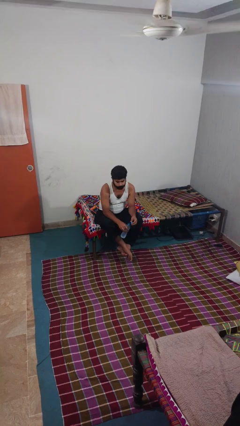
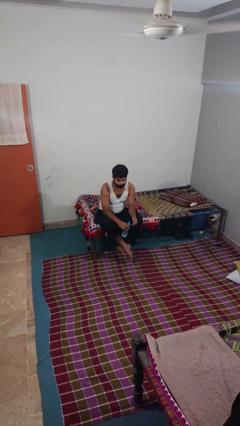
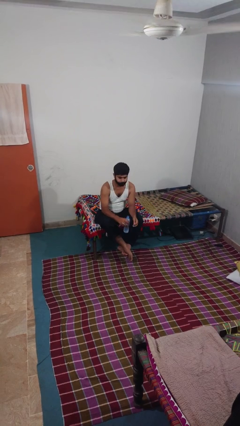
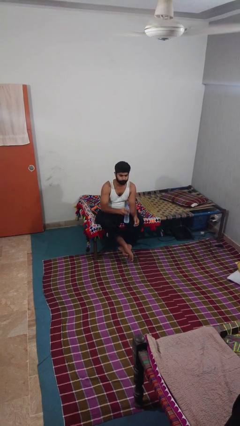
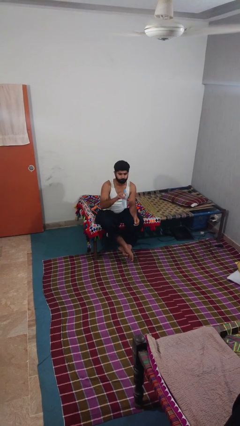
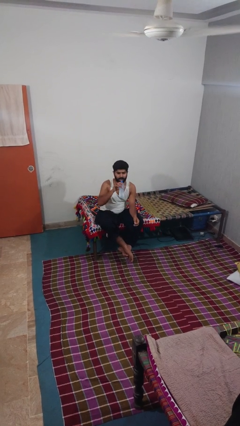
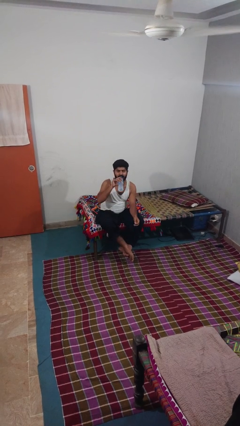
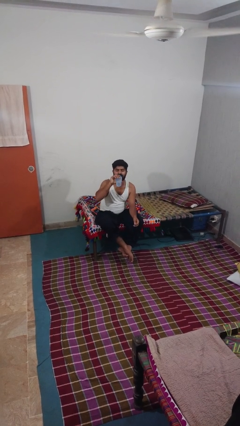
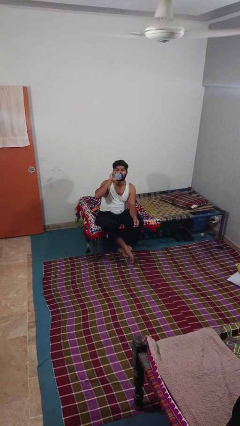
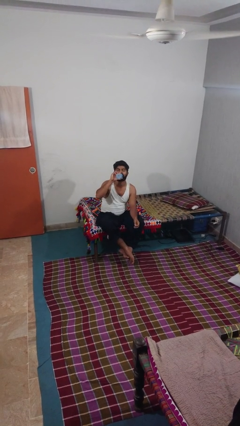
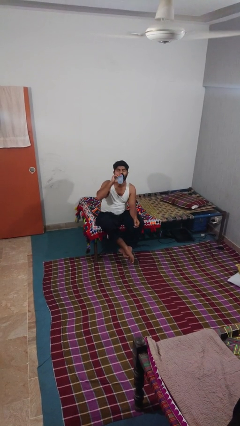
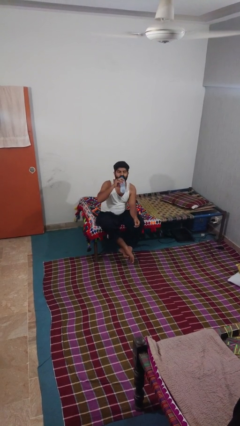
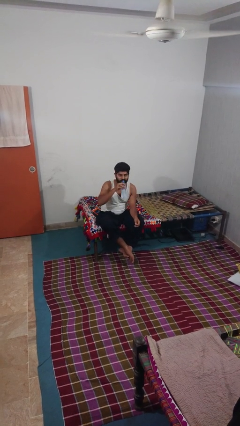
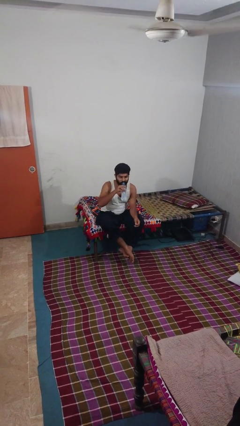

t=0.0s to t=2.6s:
person drinks from bottle

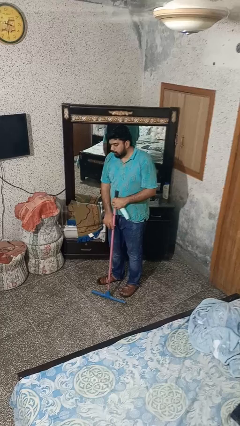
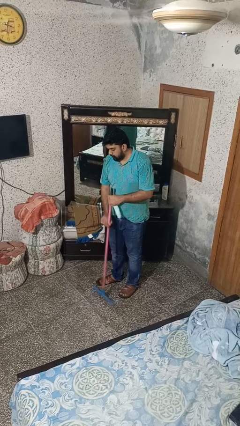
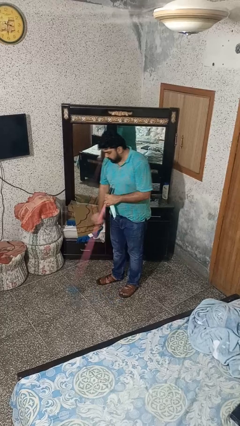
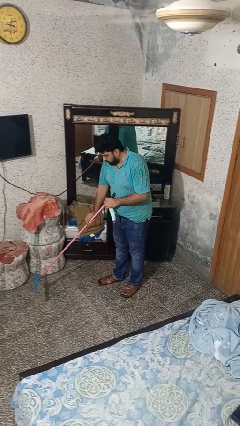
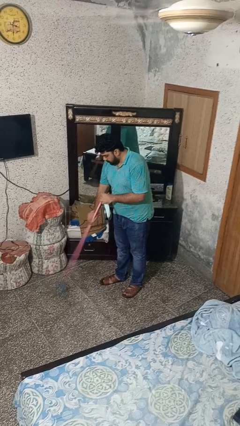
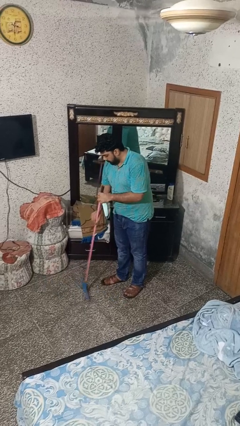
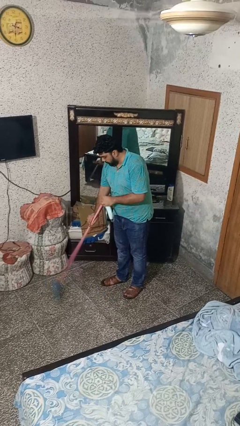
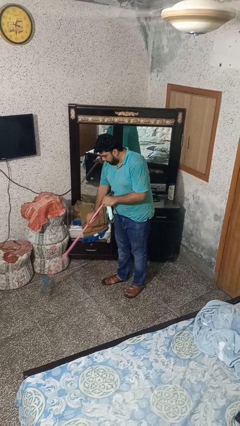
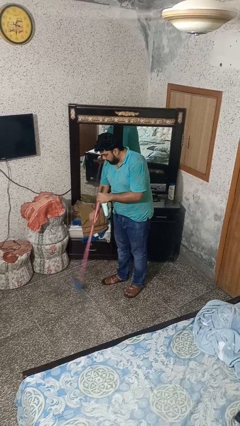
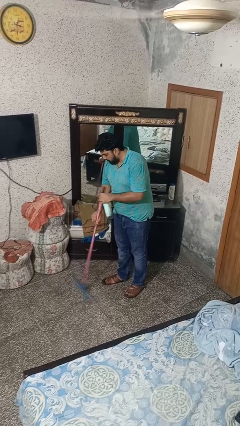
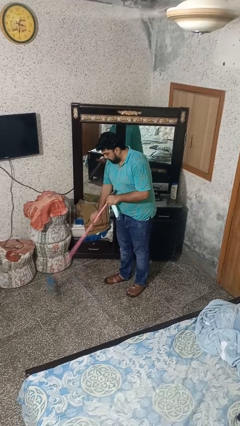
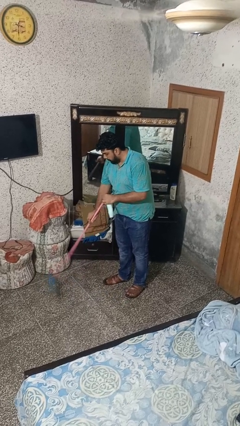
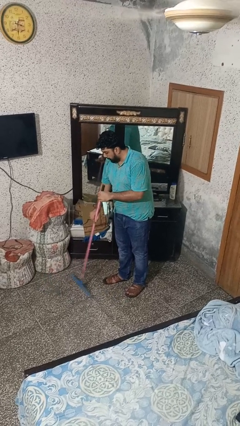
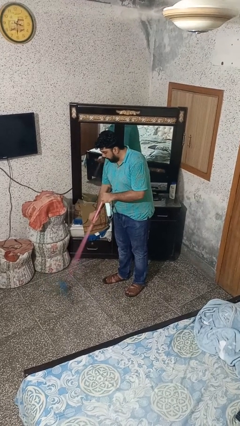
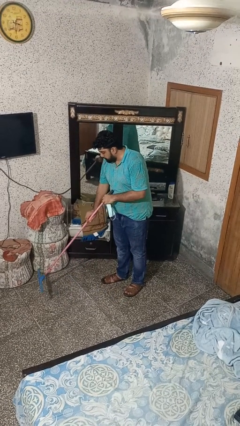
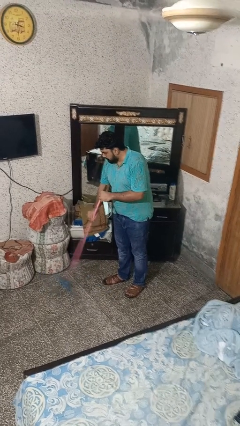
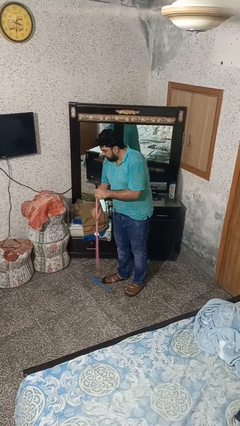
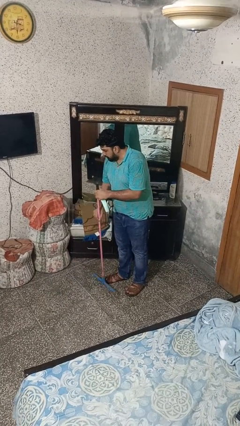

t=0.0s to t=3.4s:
person sweeps floor

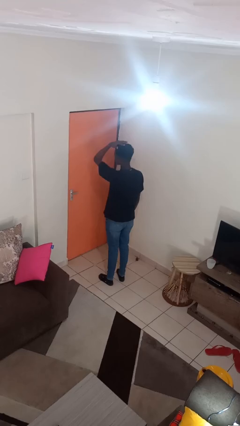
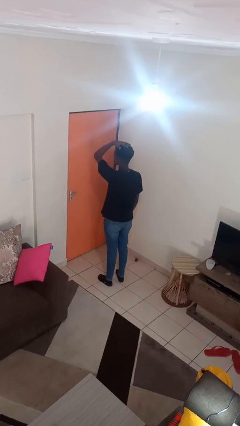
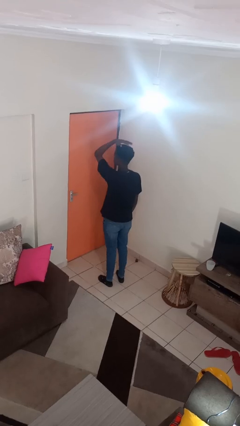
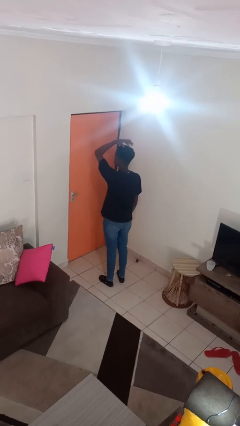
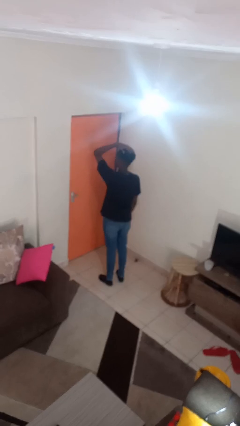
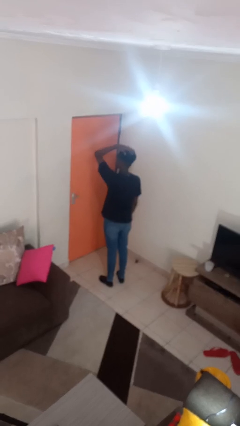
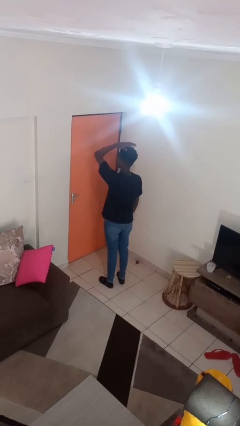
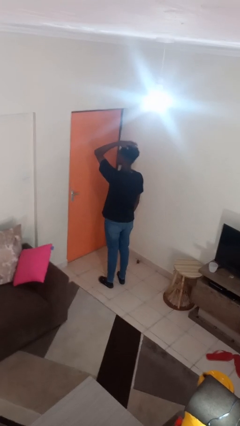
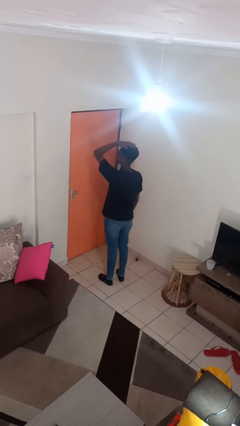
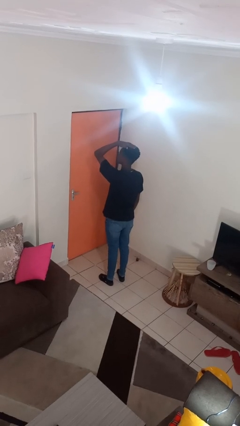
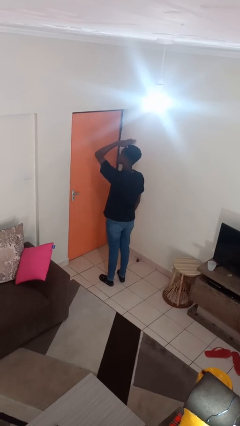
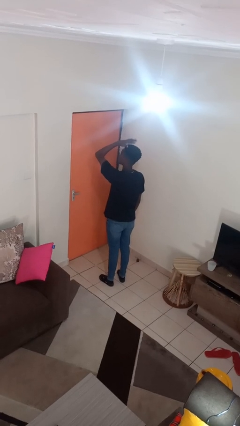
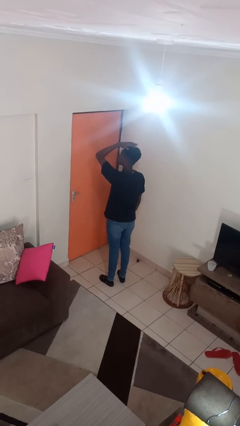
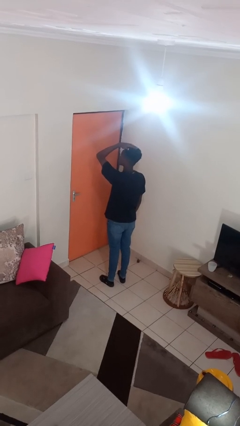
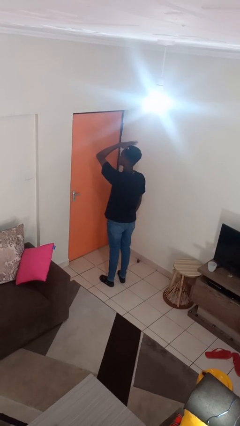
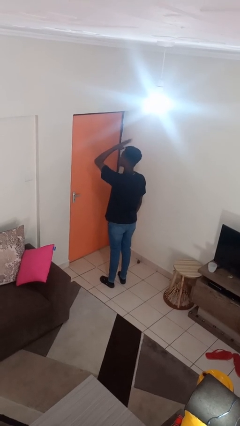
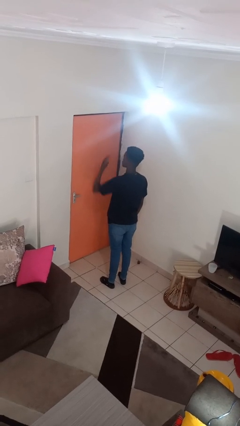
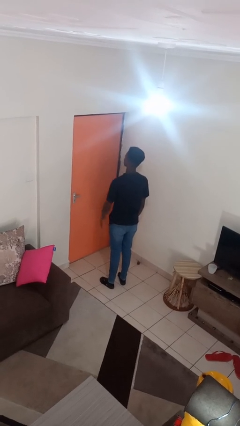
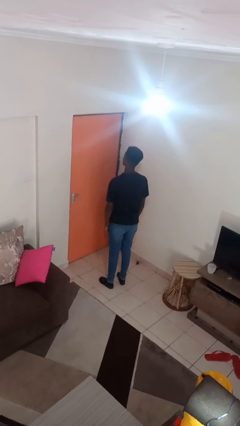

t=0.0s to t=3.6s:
person pats head

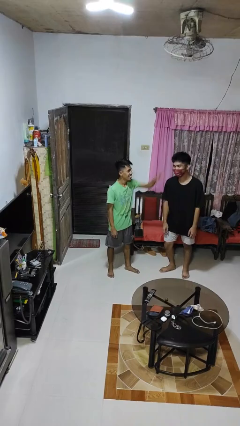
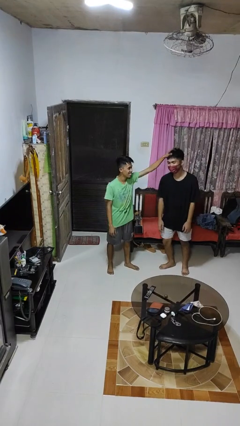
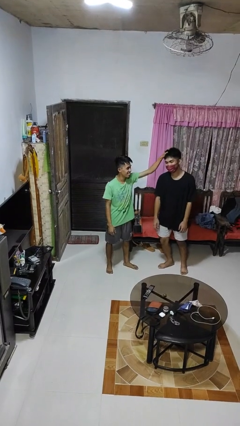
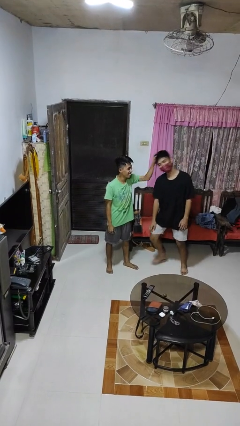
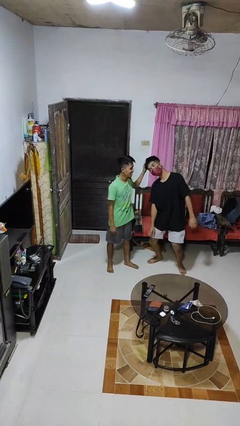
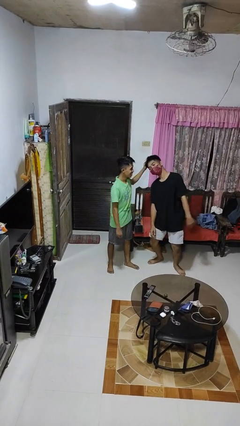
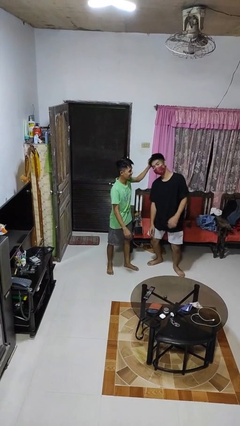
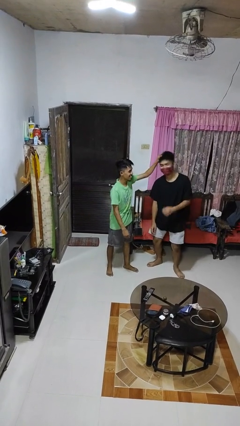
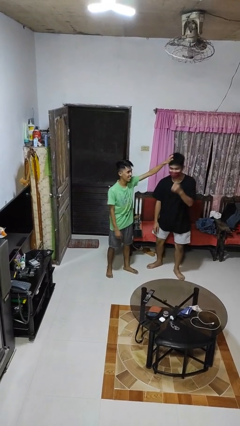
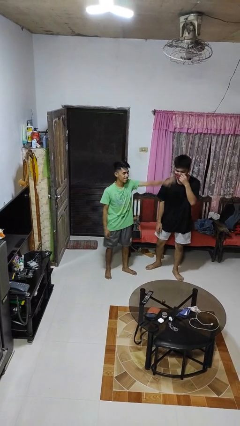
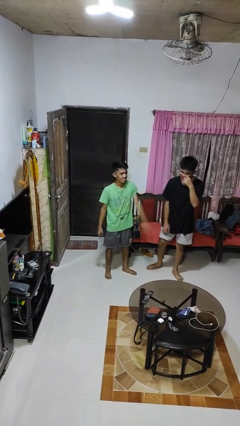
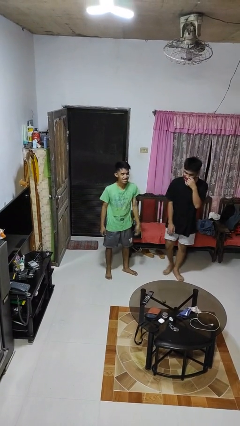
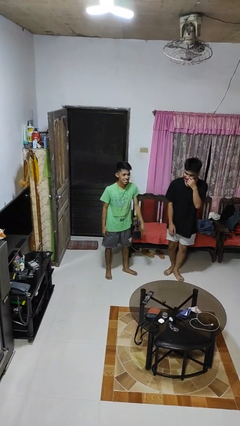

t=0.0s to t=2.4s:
person grabs person by hair

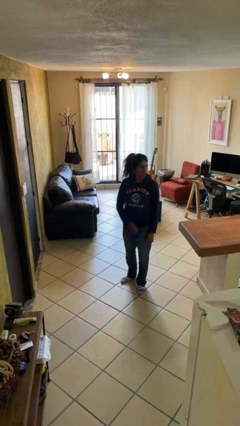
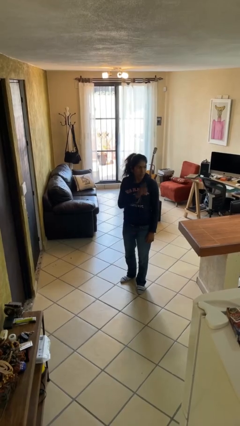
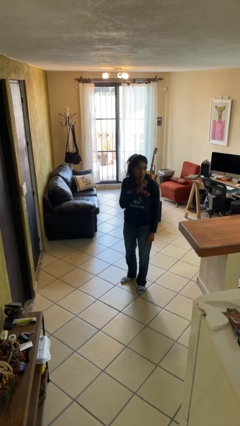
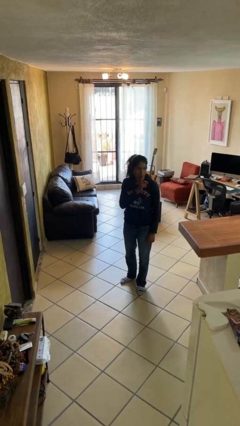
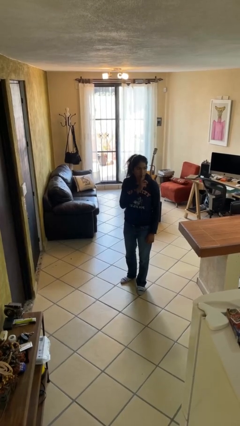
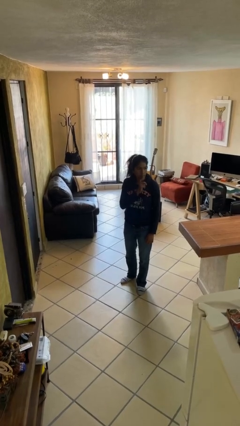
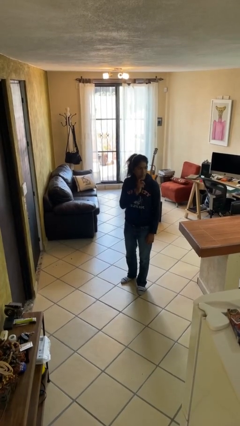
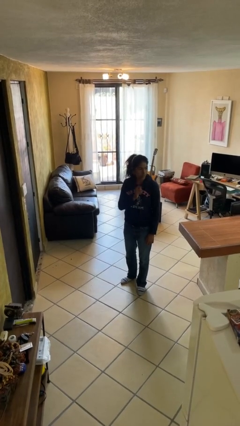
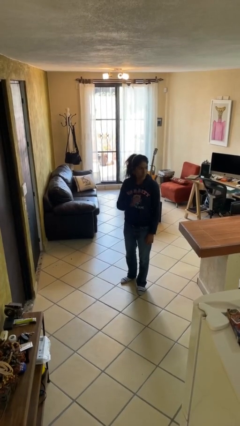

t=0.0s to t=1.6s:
person gestures be quiet

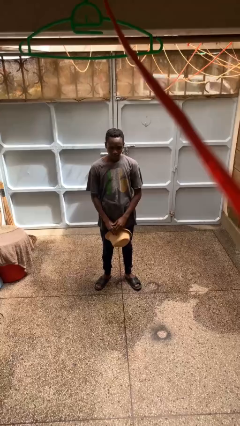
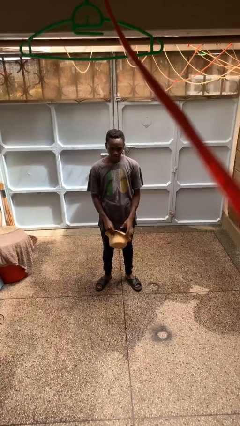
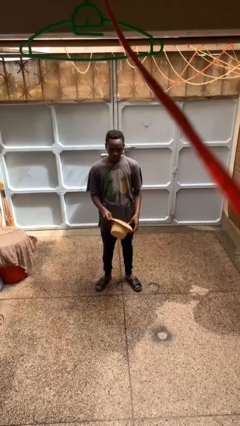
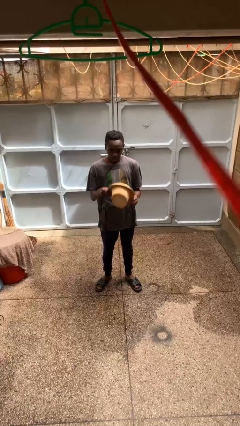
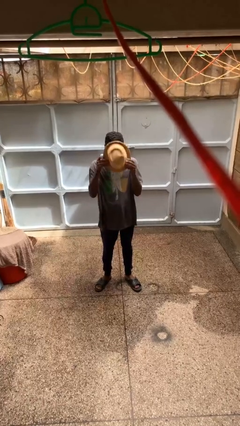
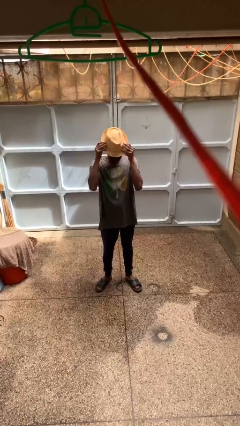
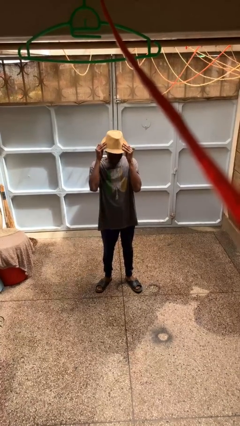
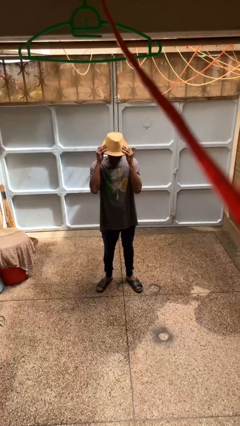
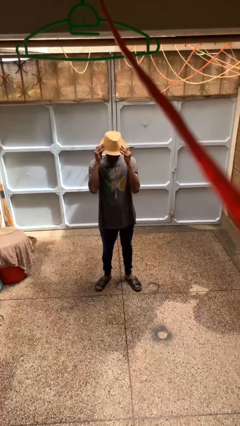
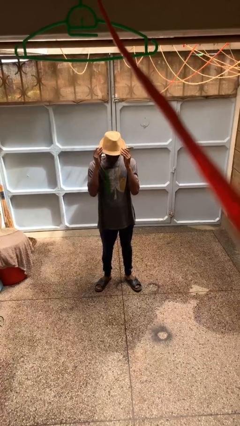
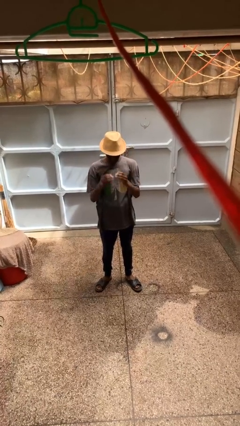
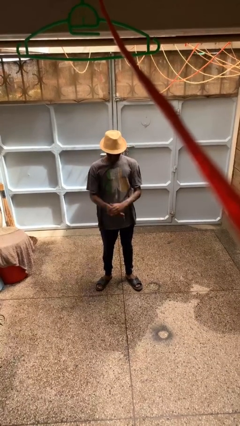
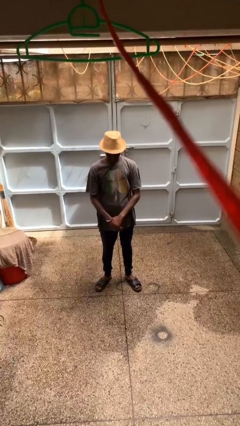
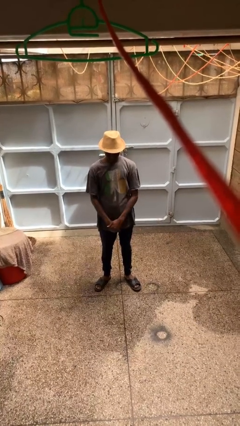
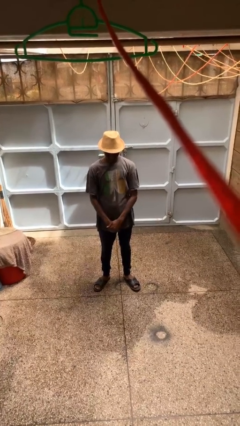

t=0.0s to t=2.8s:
person puts on hat

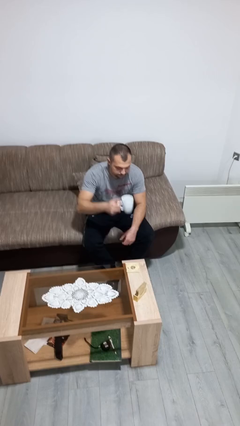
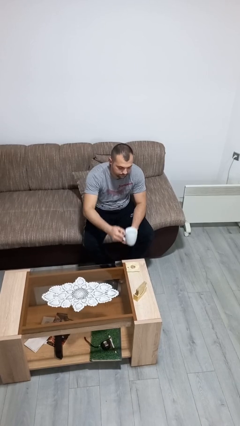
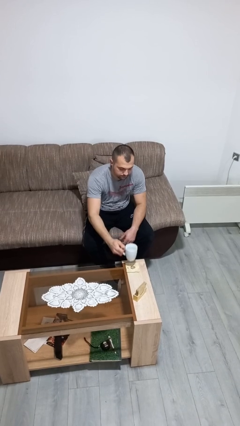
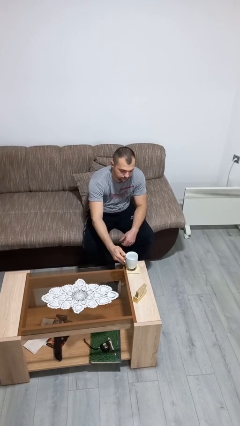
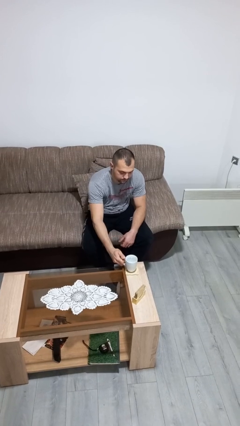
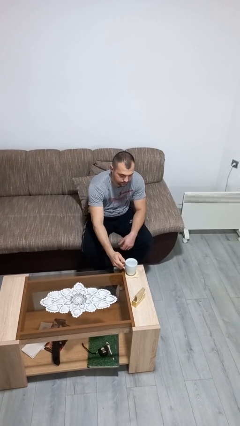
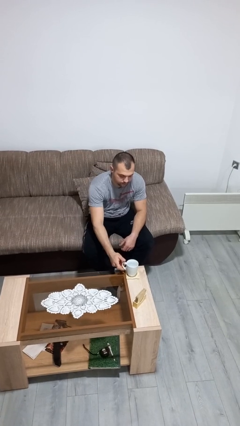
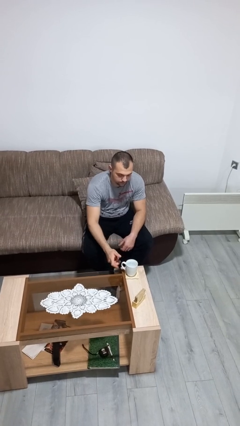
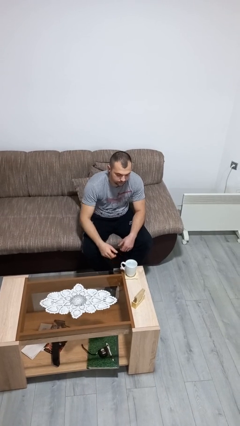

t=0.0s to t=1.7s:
person puts down object on table
